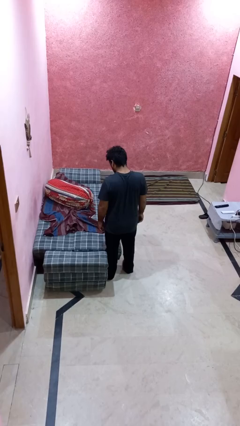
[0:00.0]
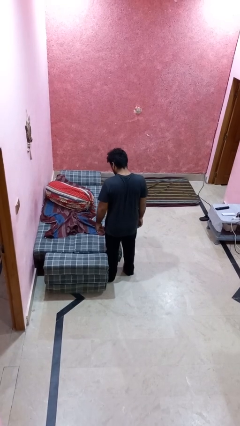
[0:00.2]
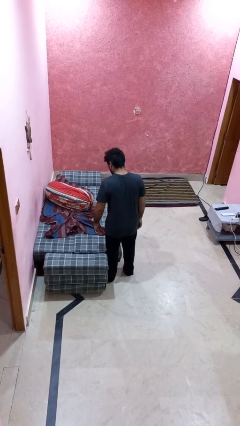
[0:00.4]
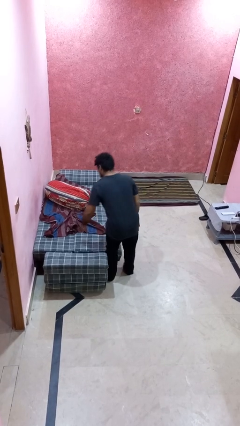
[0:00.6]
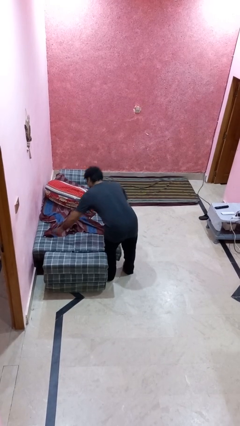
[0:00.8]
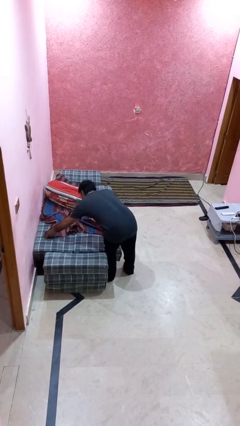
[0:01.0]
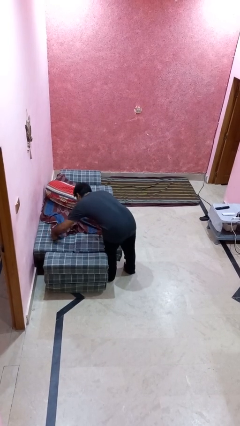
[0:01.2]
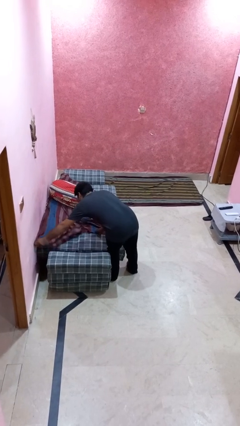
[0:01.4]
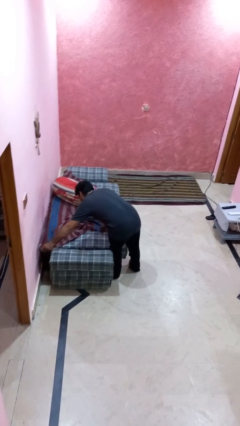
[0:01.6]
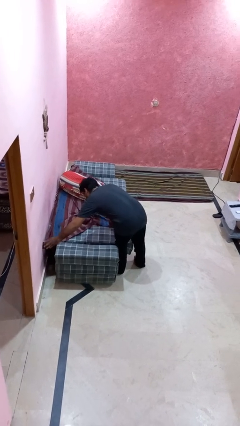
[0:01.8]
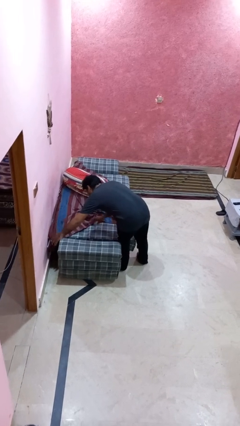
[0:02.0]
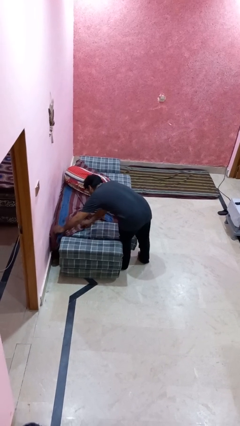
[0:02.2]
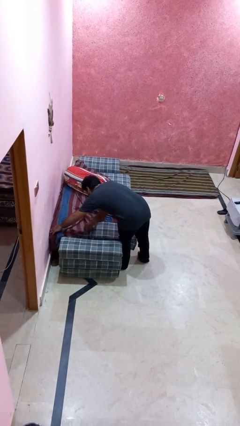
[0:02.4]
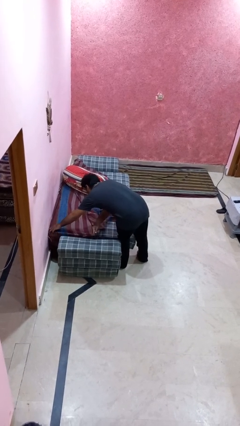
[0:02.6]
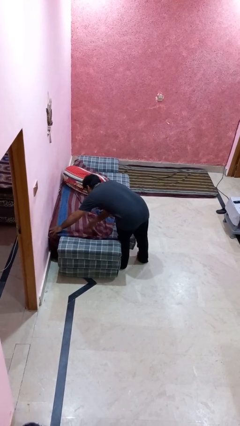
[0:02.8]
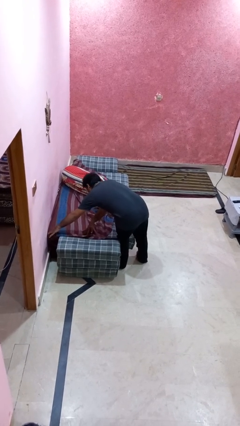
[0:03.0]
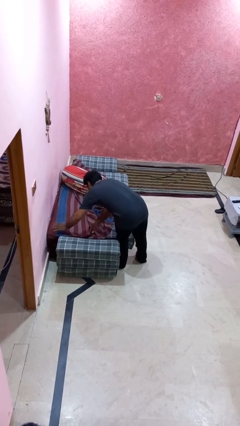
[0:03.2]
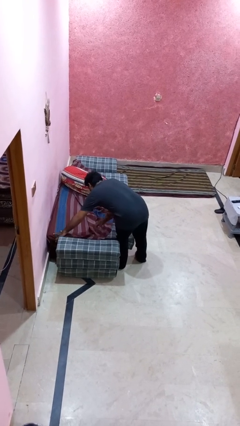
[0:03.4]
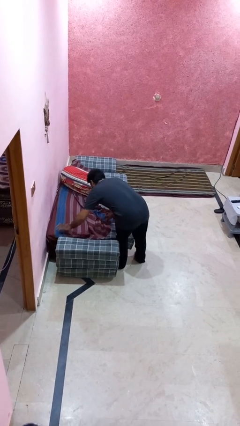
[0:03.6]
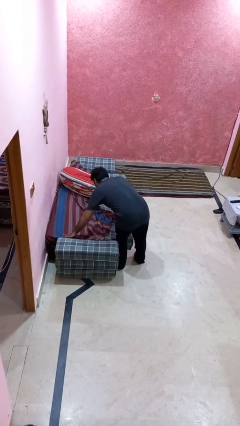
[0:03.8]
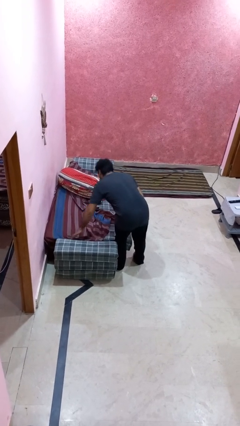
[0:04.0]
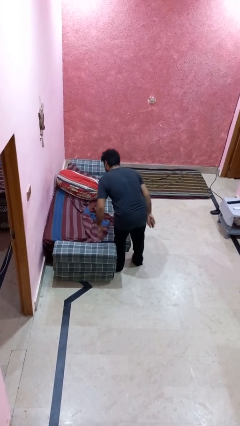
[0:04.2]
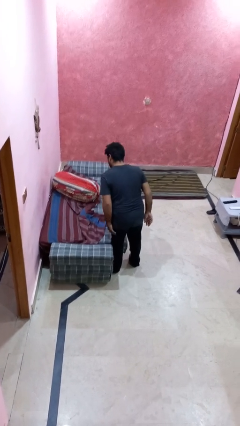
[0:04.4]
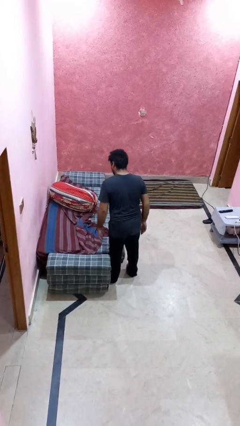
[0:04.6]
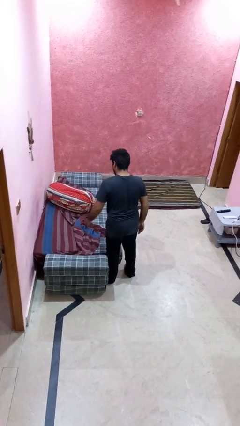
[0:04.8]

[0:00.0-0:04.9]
person makes bed

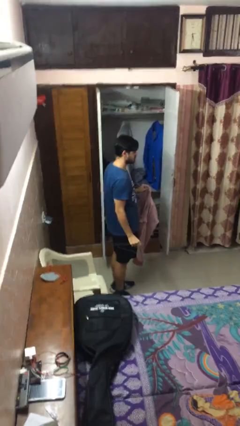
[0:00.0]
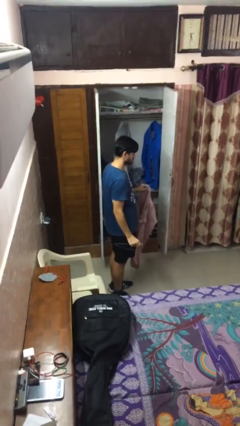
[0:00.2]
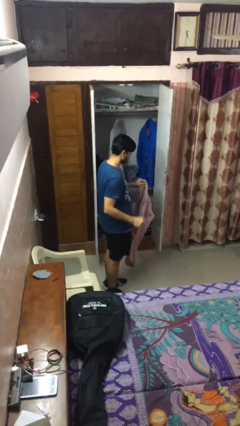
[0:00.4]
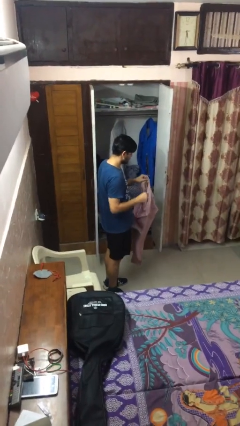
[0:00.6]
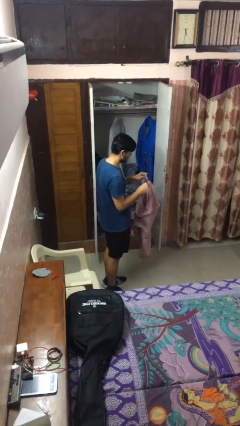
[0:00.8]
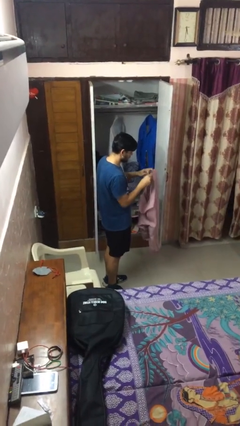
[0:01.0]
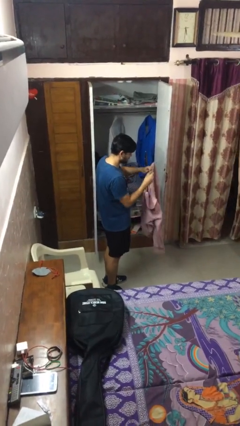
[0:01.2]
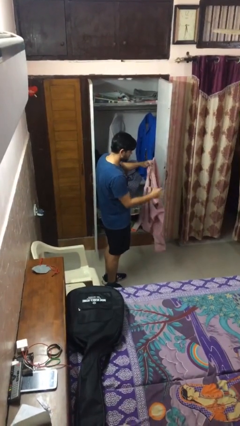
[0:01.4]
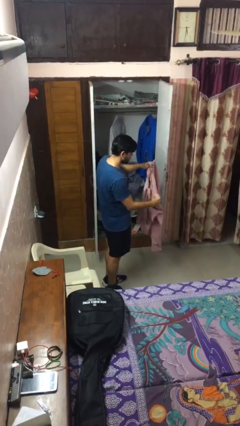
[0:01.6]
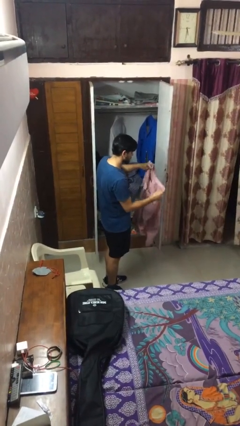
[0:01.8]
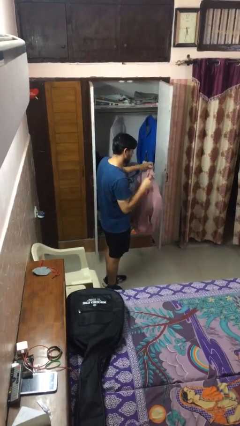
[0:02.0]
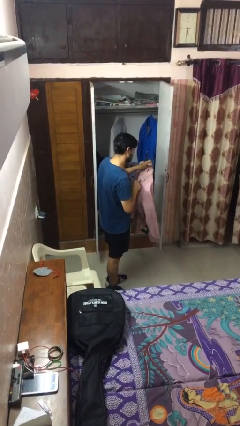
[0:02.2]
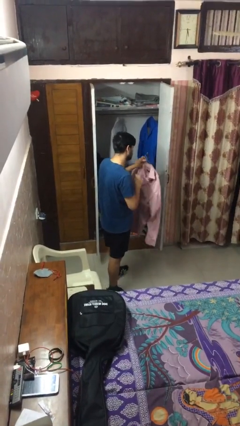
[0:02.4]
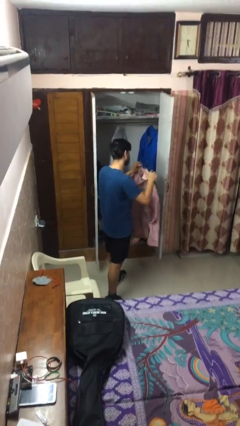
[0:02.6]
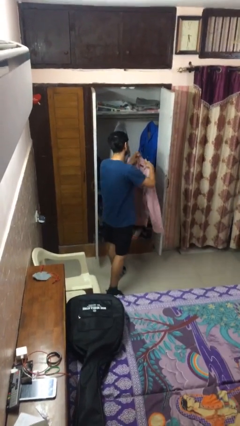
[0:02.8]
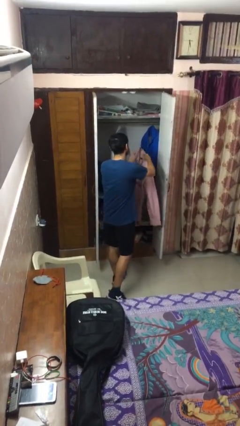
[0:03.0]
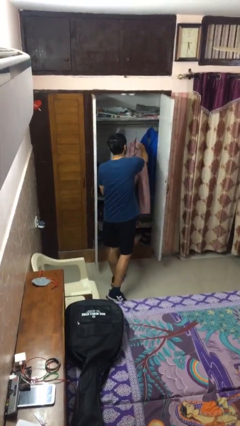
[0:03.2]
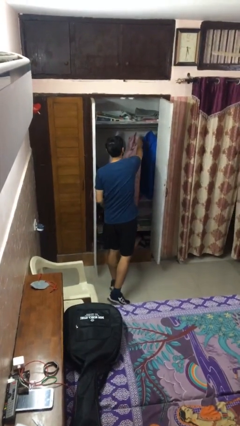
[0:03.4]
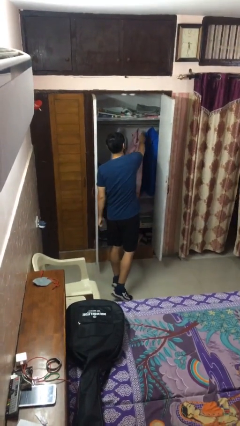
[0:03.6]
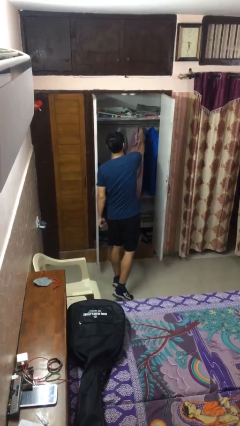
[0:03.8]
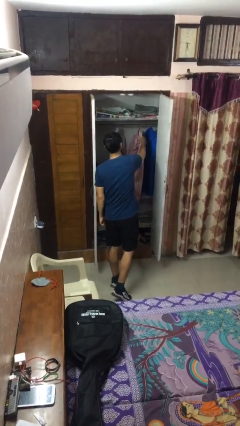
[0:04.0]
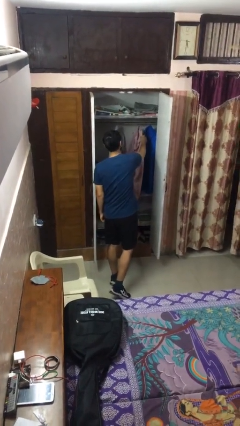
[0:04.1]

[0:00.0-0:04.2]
person puts clothes into closet

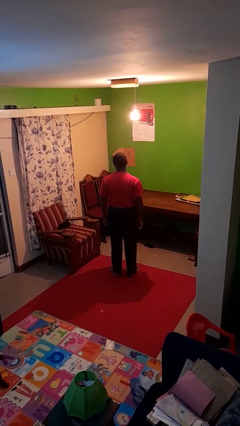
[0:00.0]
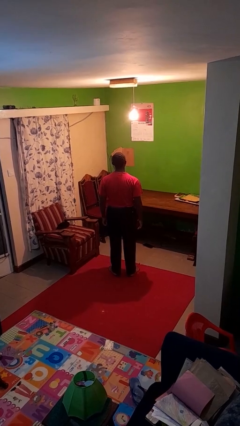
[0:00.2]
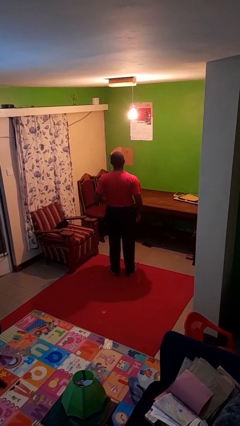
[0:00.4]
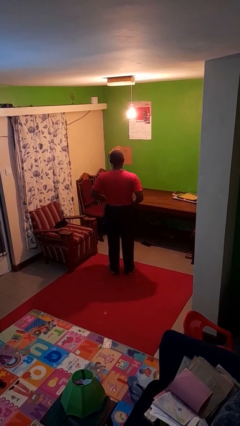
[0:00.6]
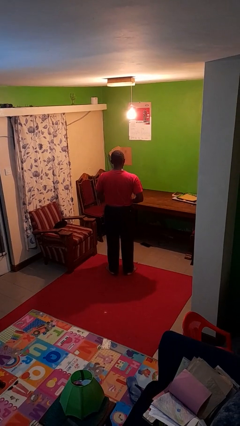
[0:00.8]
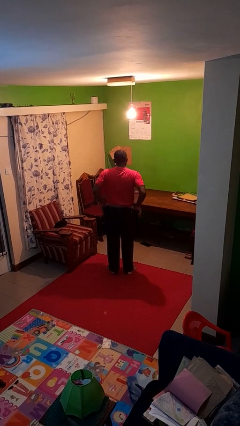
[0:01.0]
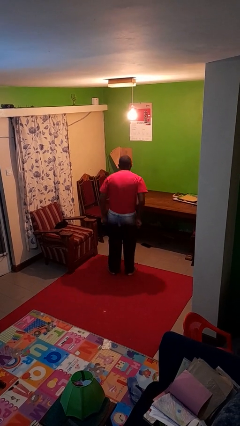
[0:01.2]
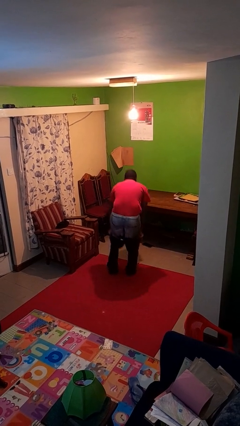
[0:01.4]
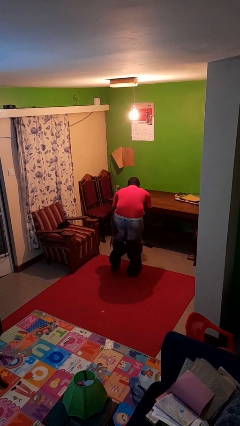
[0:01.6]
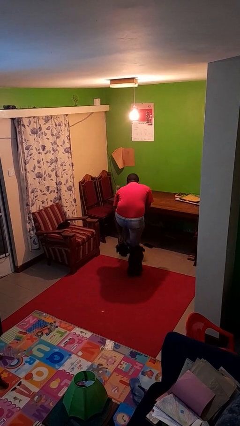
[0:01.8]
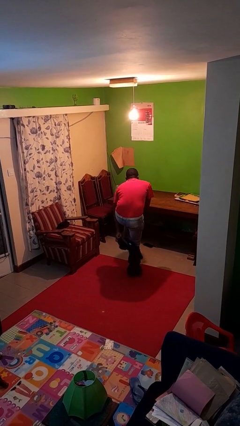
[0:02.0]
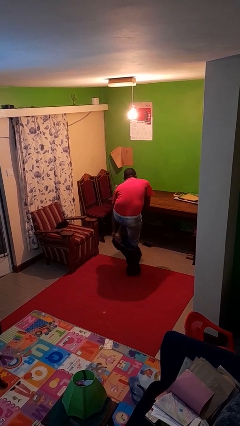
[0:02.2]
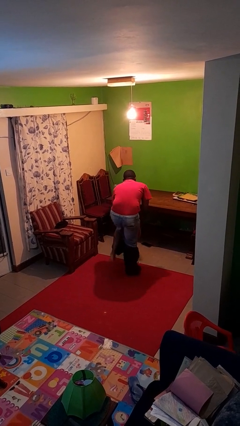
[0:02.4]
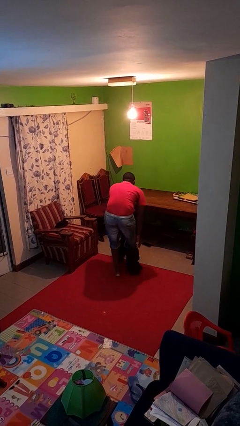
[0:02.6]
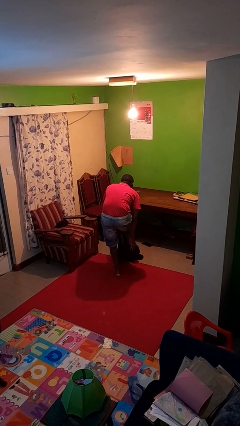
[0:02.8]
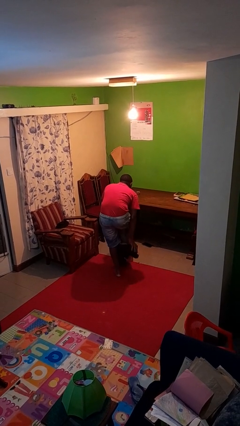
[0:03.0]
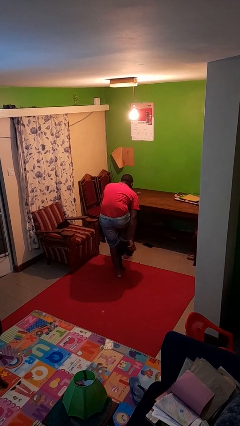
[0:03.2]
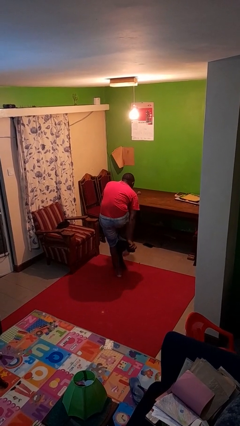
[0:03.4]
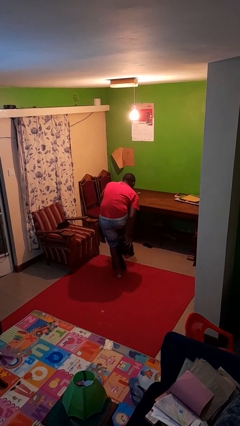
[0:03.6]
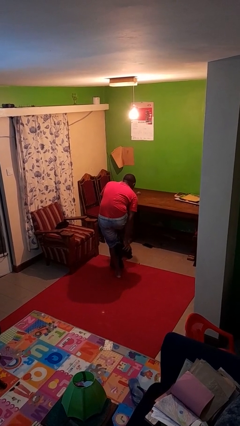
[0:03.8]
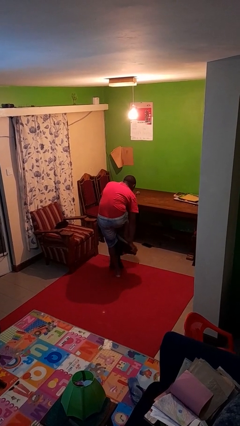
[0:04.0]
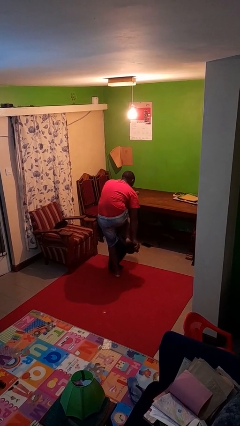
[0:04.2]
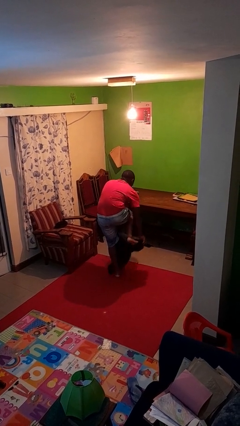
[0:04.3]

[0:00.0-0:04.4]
person takes off pants

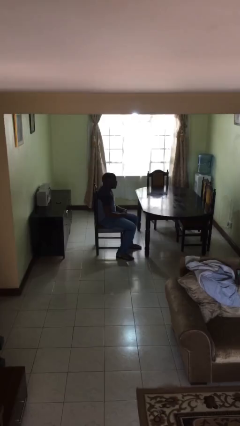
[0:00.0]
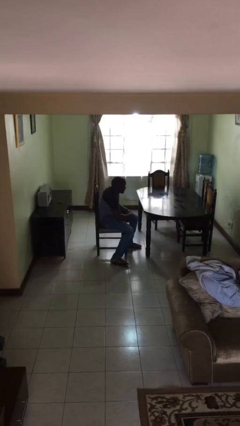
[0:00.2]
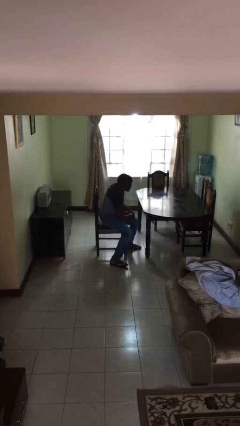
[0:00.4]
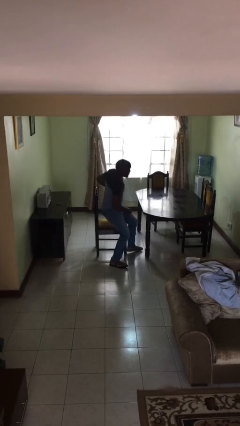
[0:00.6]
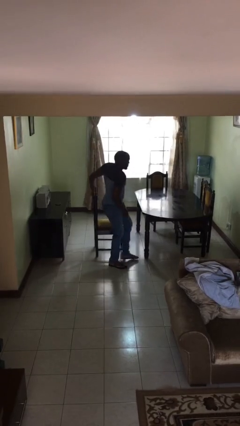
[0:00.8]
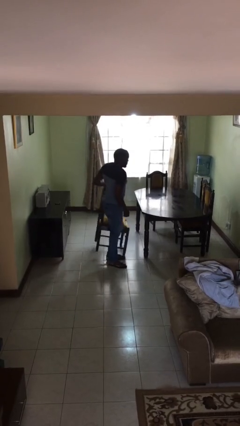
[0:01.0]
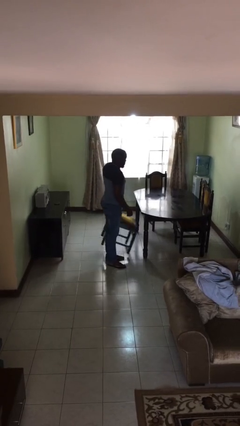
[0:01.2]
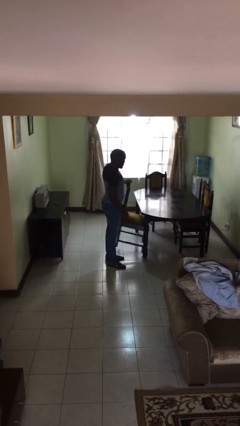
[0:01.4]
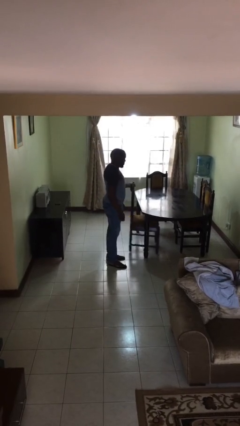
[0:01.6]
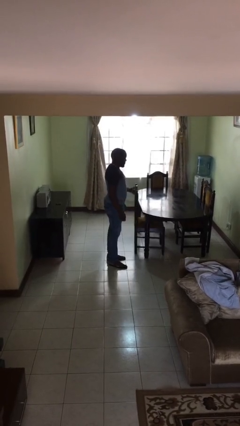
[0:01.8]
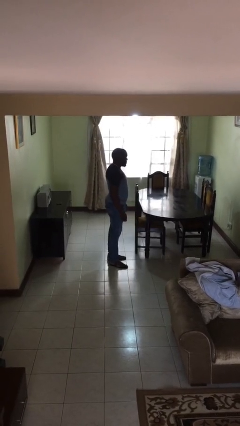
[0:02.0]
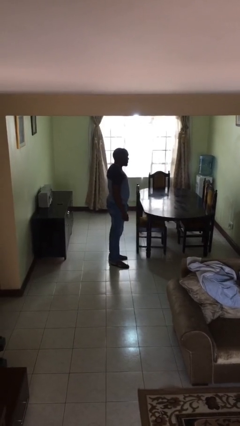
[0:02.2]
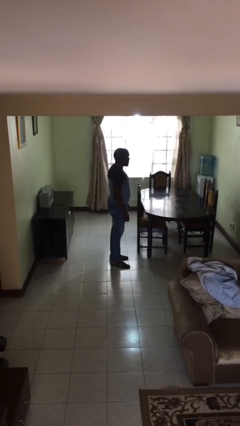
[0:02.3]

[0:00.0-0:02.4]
person stands up

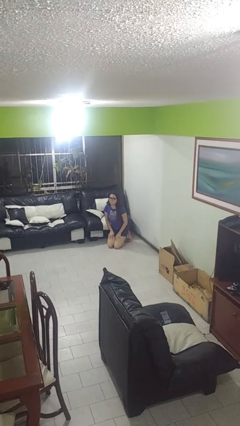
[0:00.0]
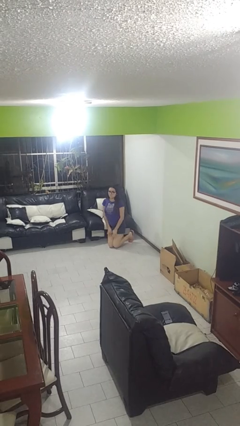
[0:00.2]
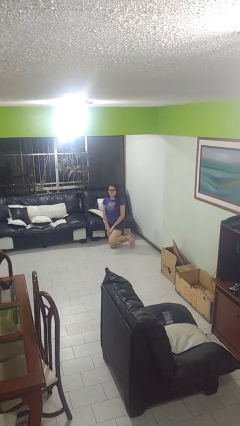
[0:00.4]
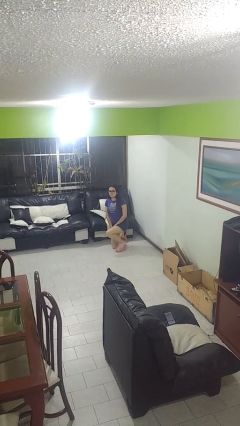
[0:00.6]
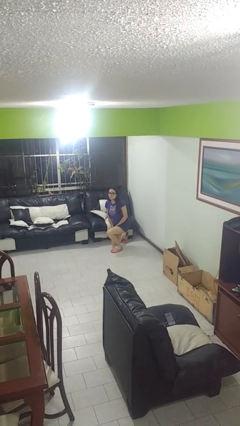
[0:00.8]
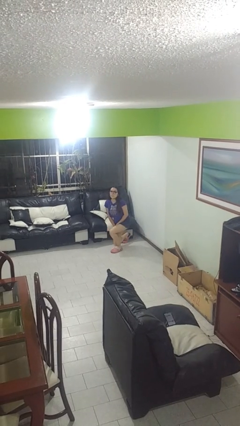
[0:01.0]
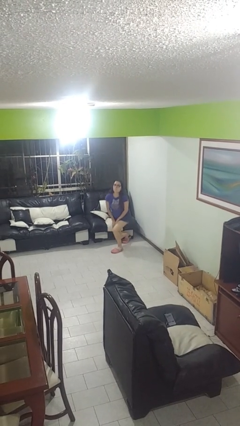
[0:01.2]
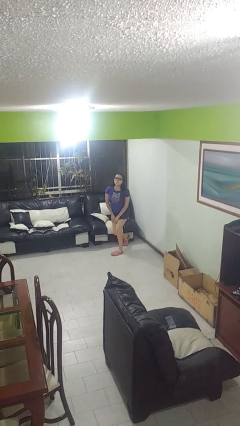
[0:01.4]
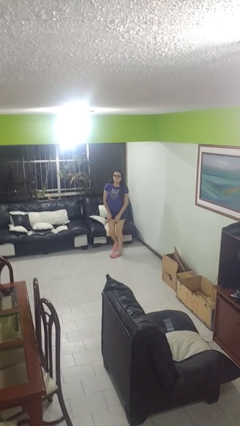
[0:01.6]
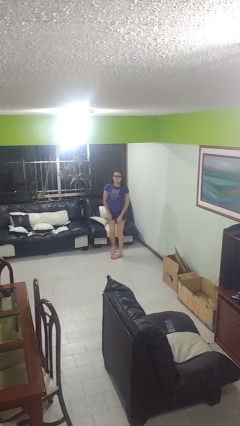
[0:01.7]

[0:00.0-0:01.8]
person stands up from floor
